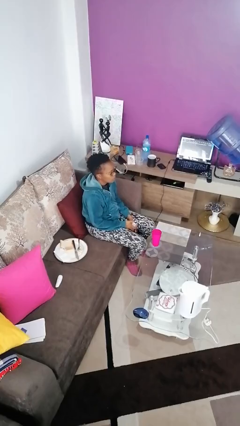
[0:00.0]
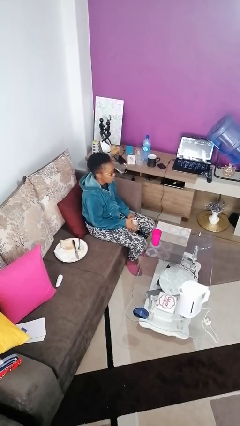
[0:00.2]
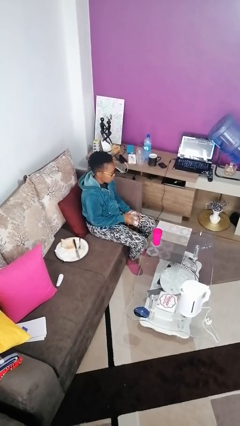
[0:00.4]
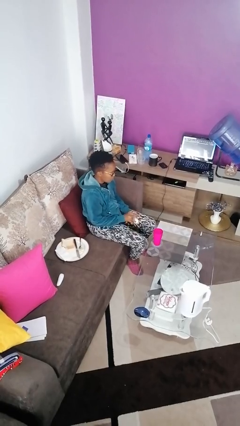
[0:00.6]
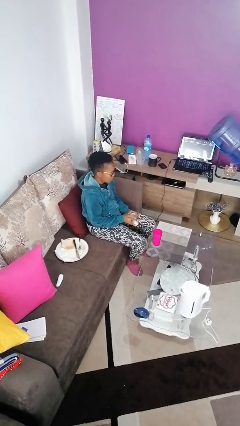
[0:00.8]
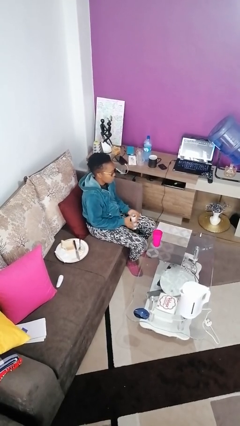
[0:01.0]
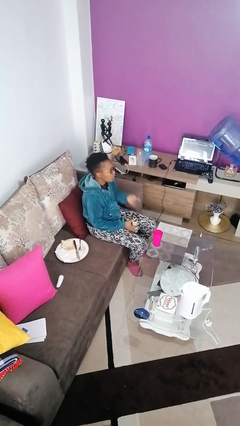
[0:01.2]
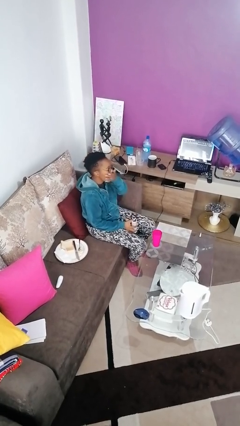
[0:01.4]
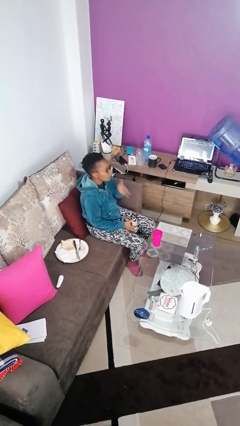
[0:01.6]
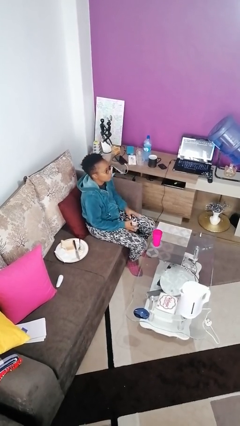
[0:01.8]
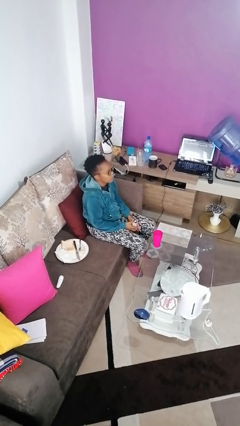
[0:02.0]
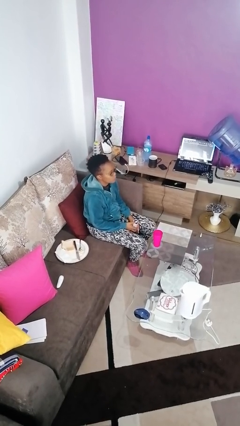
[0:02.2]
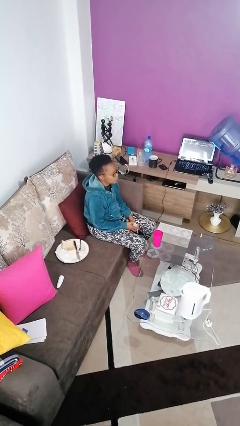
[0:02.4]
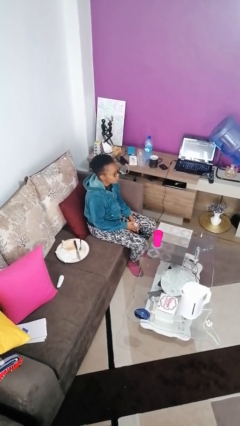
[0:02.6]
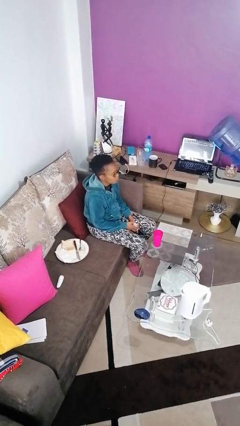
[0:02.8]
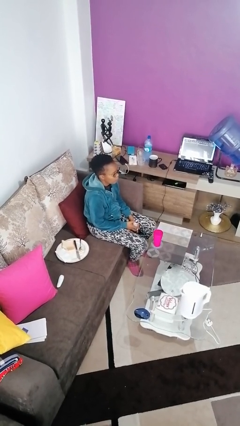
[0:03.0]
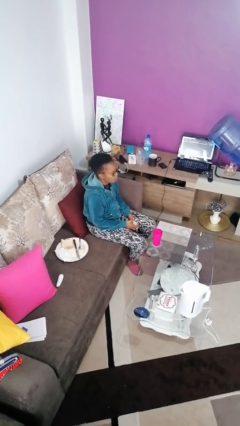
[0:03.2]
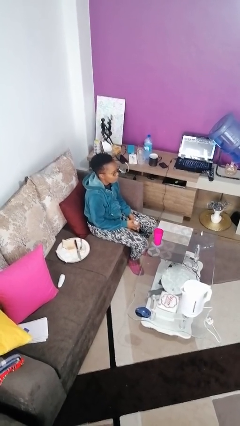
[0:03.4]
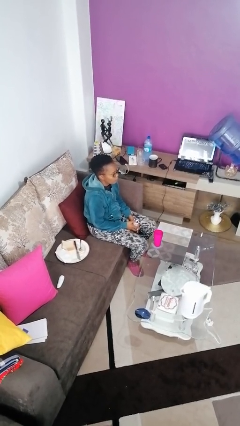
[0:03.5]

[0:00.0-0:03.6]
person takes medicine pills

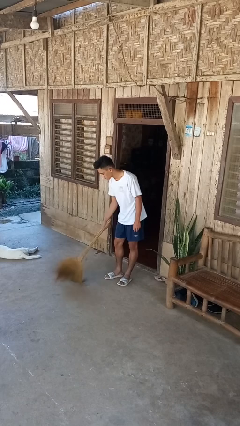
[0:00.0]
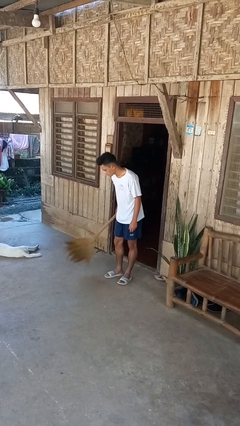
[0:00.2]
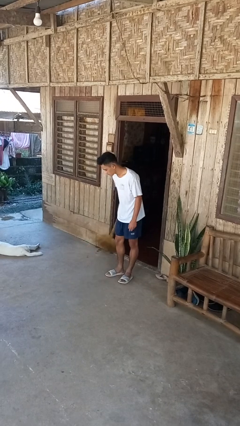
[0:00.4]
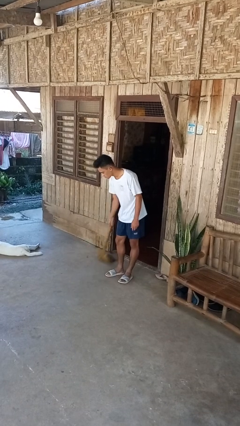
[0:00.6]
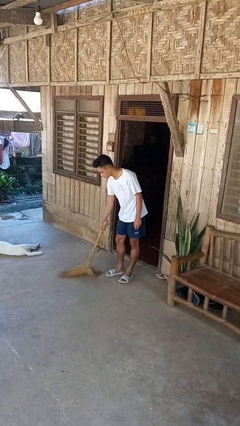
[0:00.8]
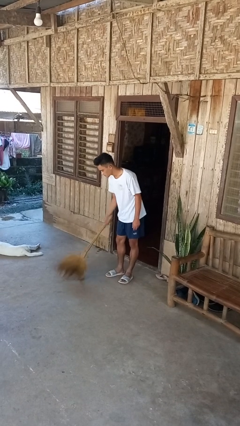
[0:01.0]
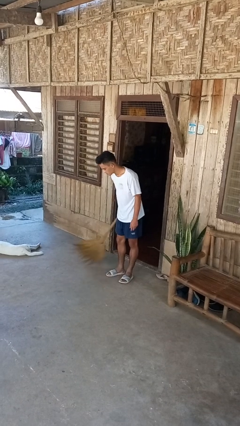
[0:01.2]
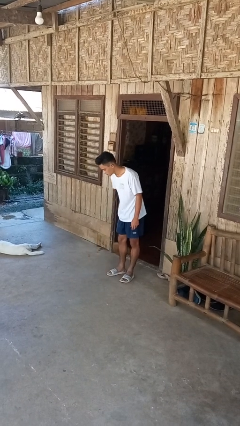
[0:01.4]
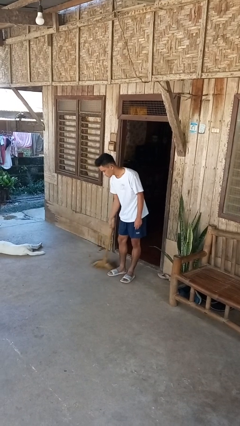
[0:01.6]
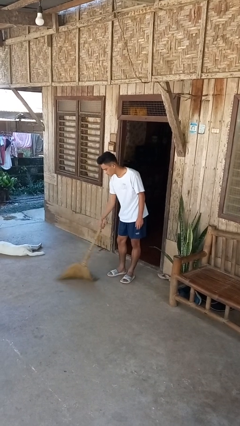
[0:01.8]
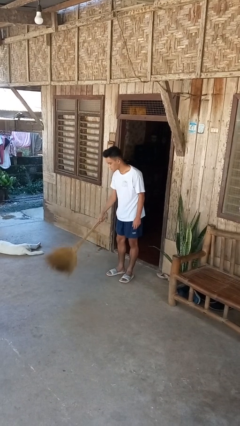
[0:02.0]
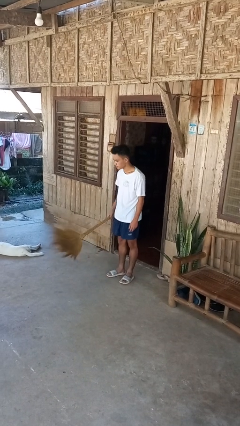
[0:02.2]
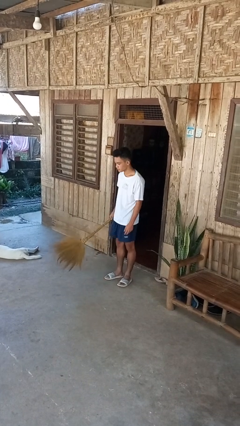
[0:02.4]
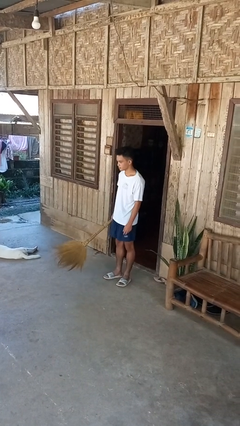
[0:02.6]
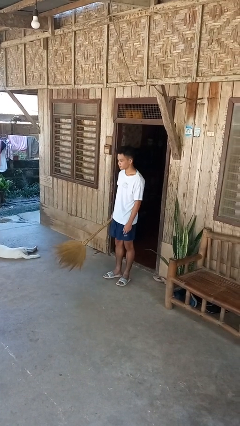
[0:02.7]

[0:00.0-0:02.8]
person sweeps floor

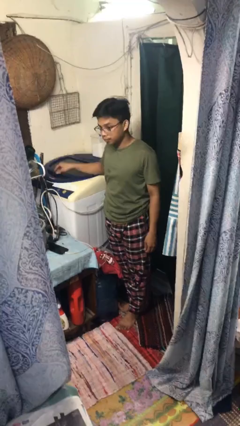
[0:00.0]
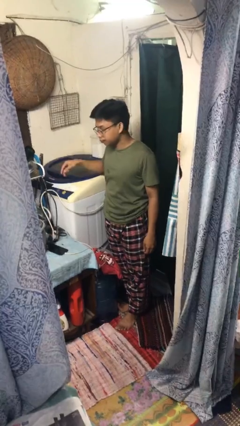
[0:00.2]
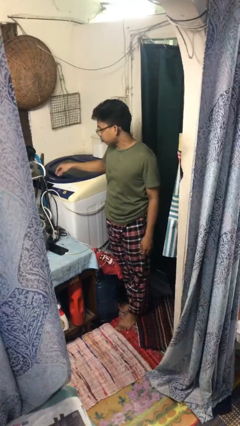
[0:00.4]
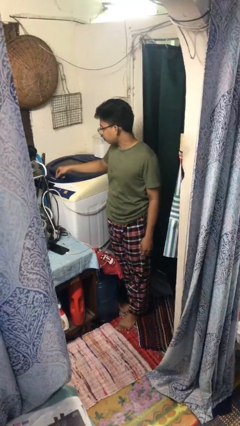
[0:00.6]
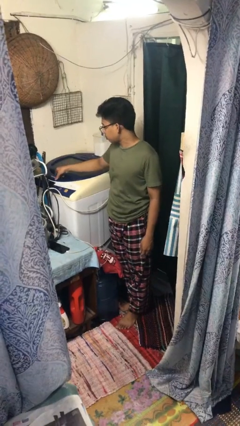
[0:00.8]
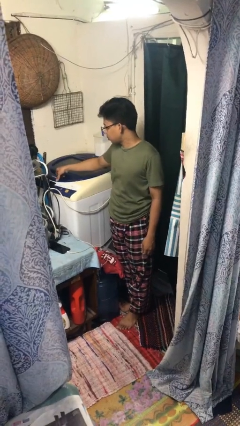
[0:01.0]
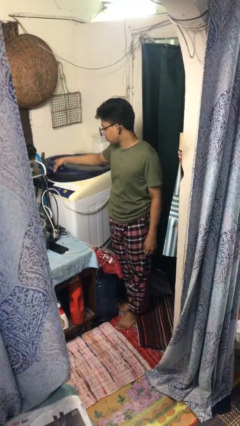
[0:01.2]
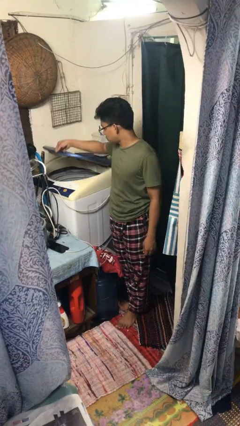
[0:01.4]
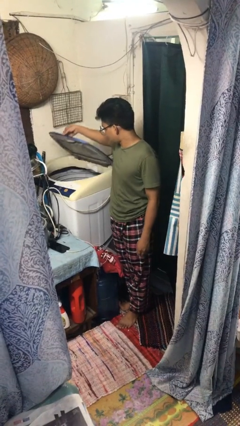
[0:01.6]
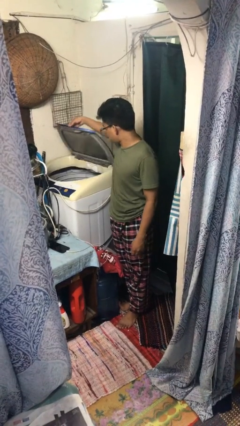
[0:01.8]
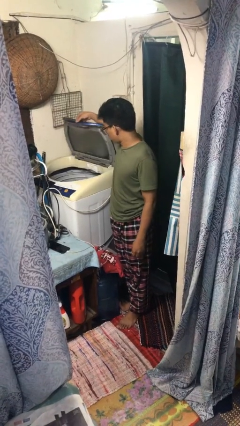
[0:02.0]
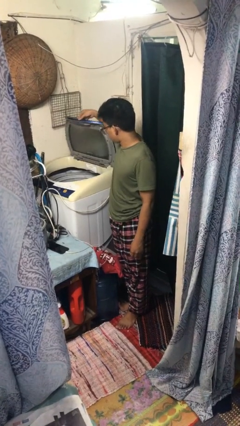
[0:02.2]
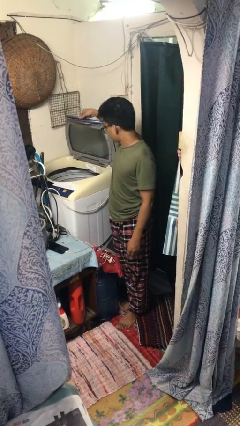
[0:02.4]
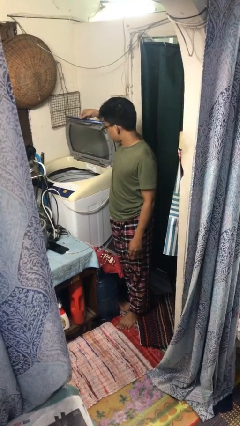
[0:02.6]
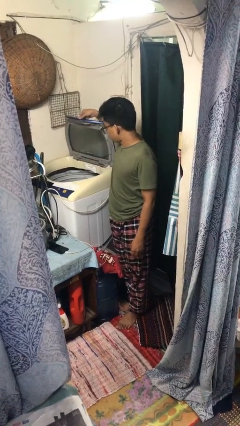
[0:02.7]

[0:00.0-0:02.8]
person opens clothes washer

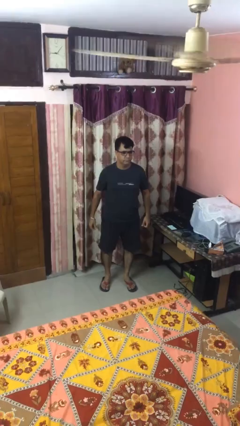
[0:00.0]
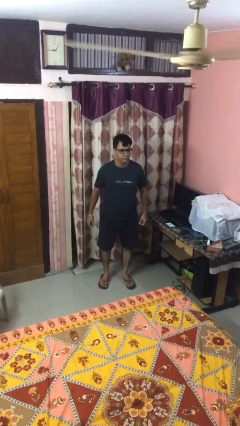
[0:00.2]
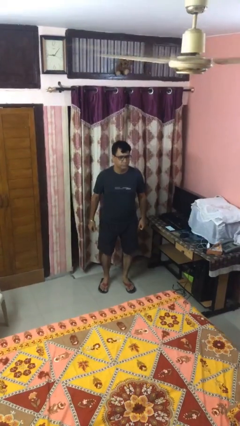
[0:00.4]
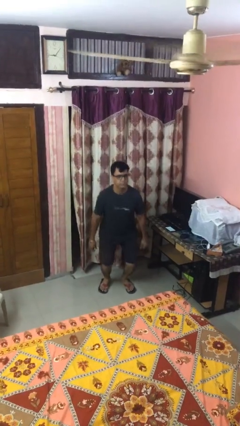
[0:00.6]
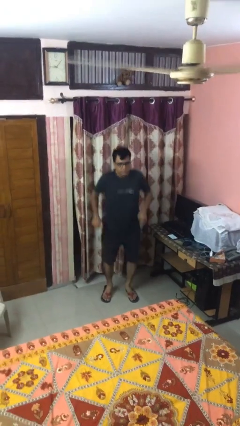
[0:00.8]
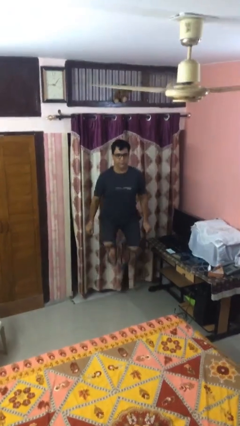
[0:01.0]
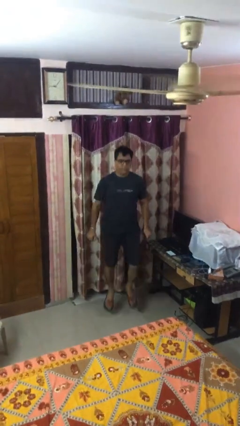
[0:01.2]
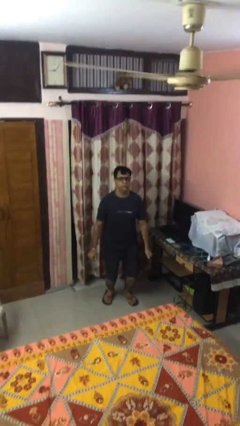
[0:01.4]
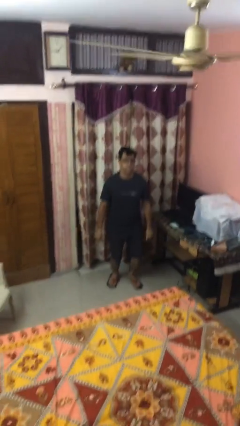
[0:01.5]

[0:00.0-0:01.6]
person jumps

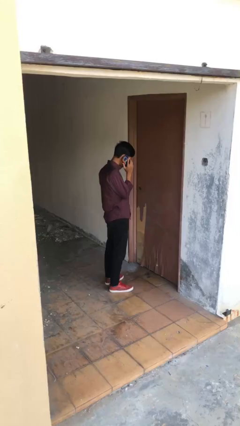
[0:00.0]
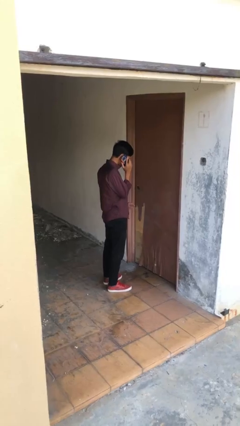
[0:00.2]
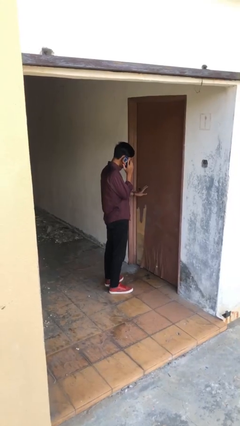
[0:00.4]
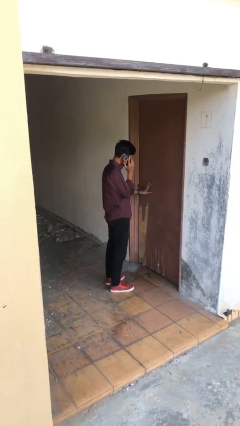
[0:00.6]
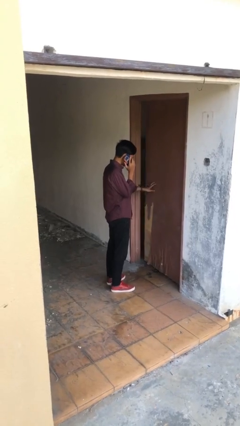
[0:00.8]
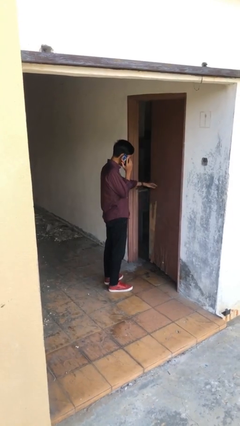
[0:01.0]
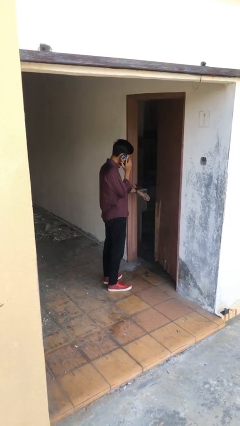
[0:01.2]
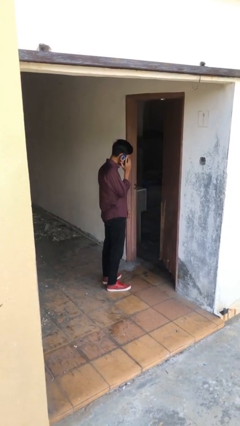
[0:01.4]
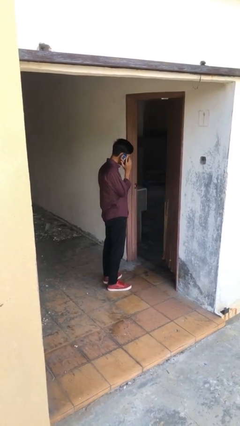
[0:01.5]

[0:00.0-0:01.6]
person opens facility door

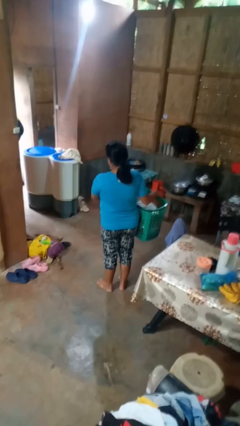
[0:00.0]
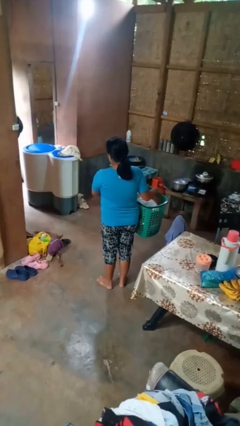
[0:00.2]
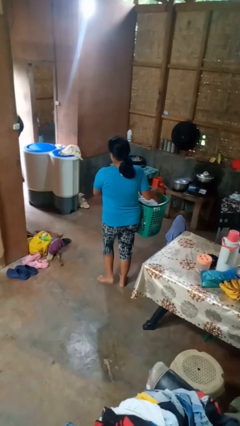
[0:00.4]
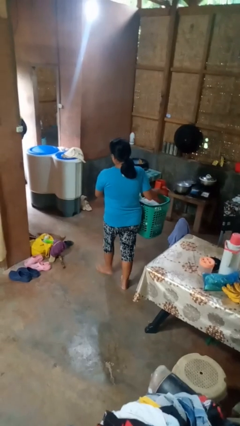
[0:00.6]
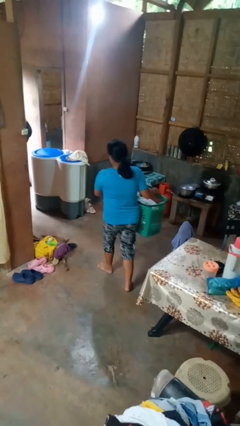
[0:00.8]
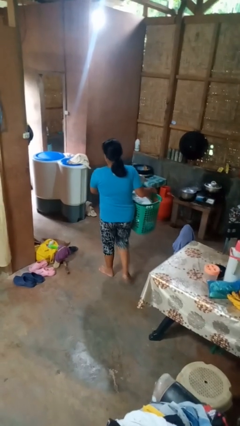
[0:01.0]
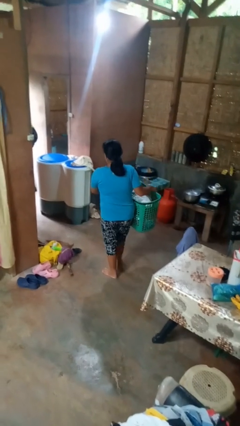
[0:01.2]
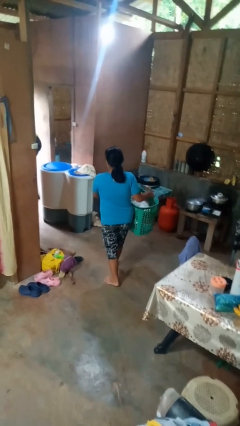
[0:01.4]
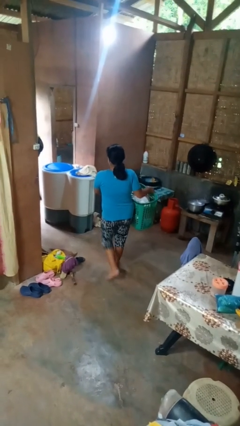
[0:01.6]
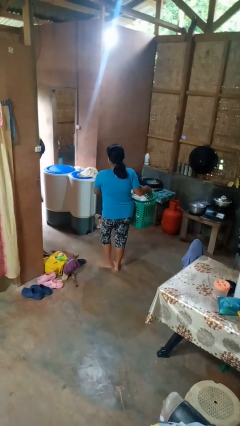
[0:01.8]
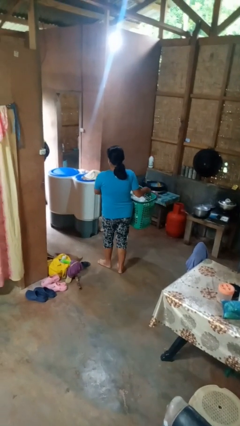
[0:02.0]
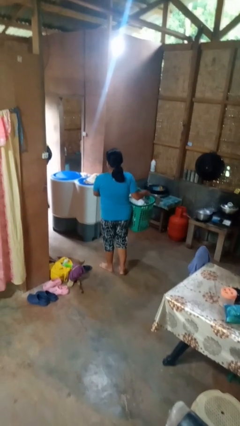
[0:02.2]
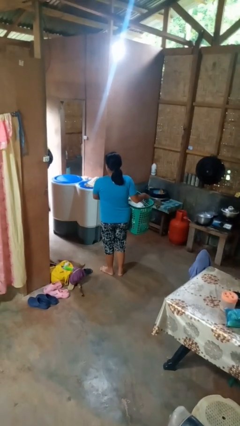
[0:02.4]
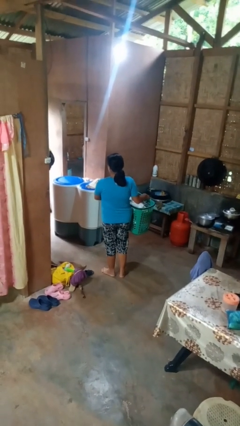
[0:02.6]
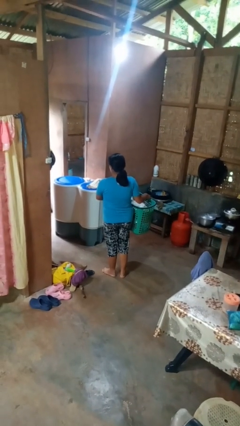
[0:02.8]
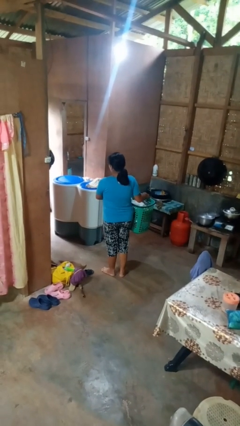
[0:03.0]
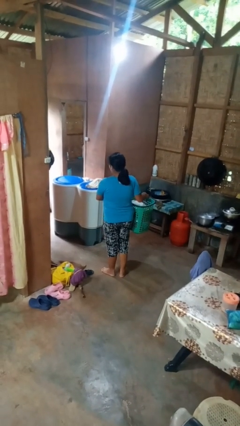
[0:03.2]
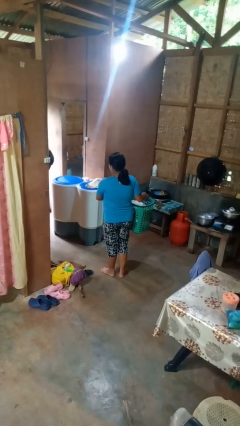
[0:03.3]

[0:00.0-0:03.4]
person carries laundry basket

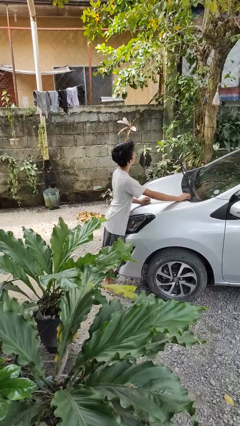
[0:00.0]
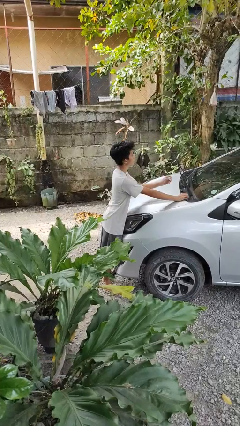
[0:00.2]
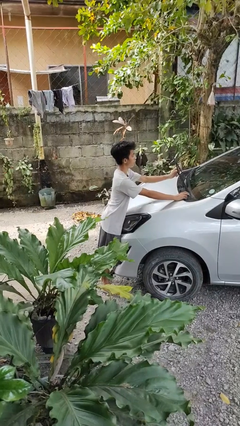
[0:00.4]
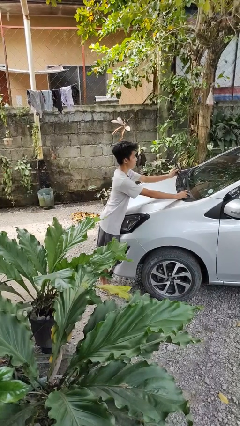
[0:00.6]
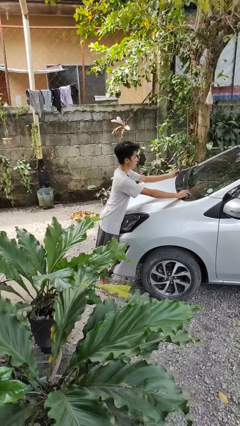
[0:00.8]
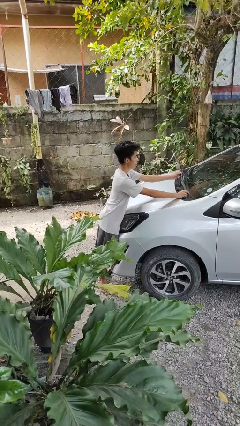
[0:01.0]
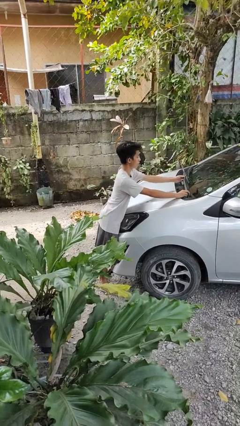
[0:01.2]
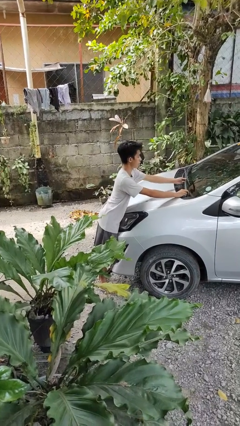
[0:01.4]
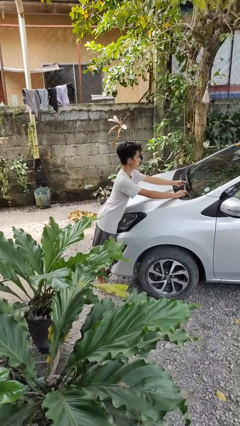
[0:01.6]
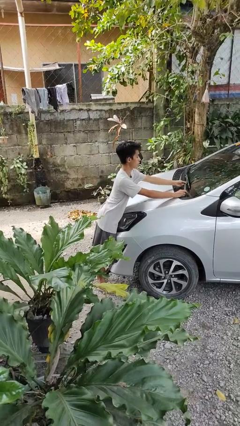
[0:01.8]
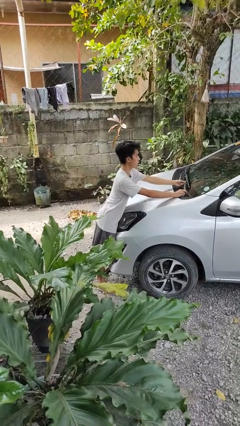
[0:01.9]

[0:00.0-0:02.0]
person flips down car wipers
